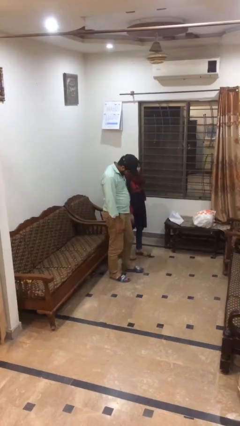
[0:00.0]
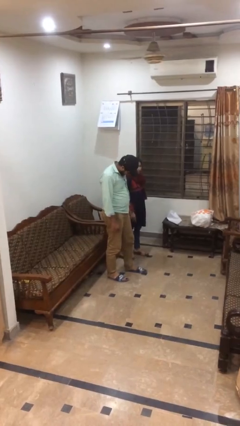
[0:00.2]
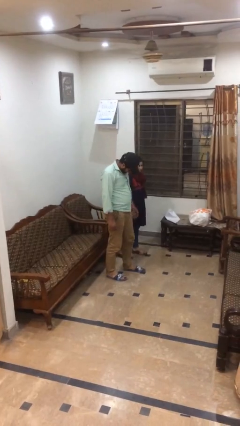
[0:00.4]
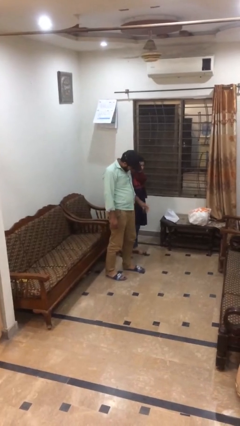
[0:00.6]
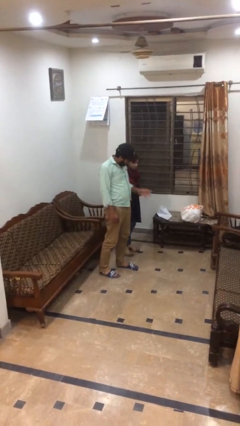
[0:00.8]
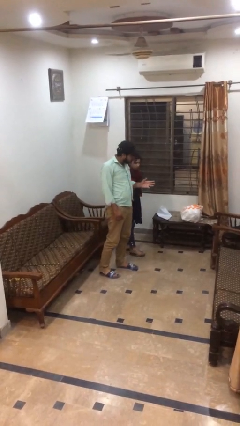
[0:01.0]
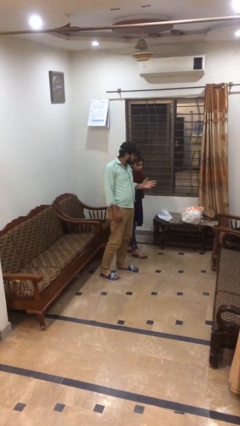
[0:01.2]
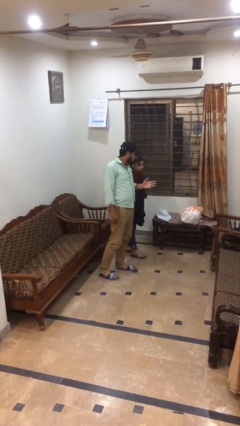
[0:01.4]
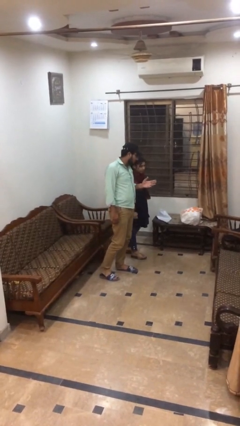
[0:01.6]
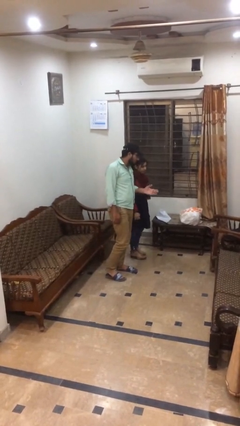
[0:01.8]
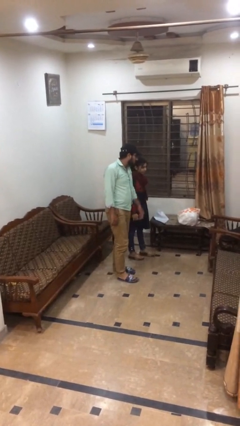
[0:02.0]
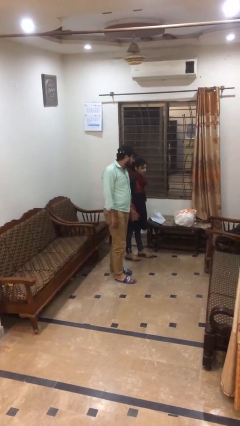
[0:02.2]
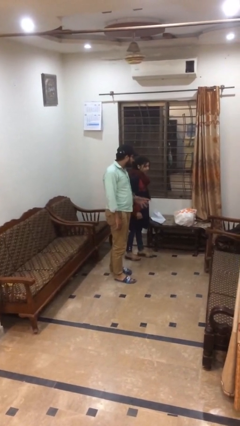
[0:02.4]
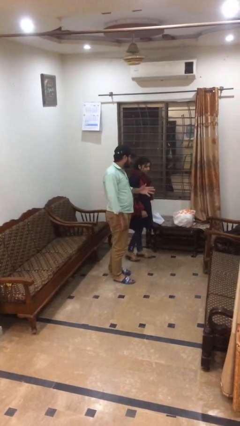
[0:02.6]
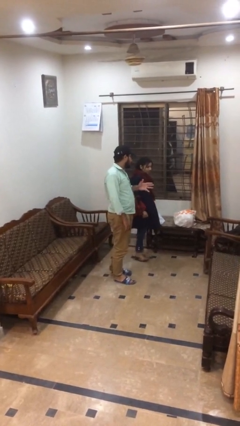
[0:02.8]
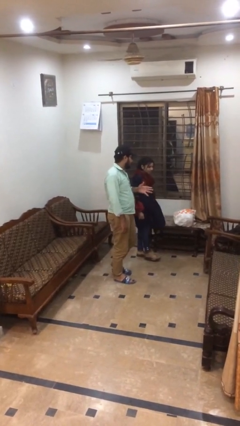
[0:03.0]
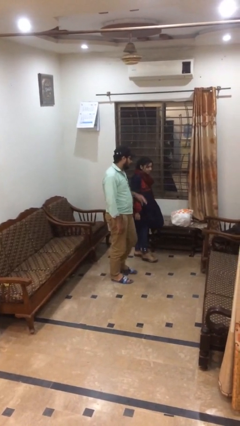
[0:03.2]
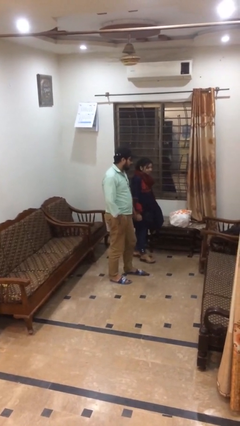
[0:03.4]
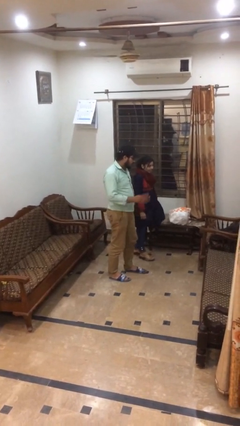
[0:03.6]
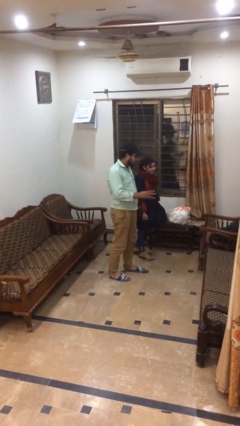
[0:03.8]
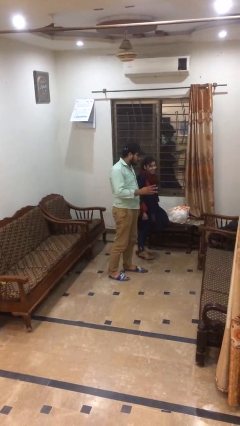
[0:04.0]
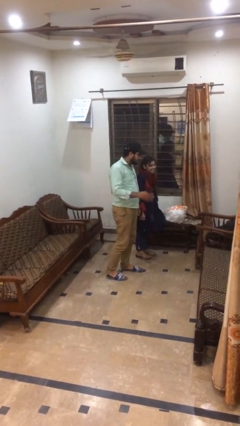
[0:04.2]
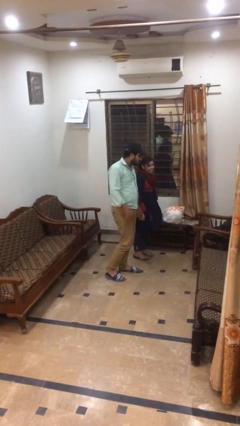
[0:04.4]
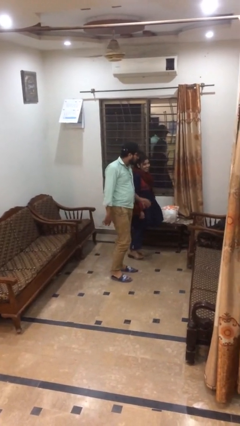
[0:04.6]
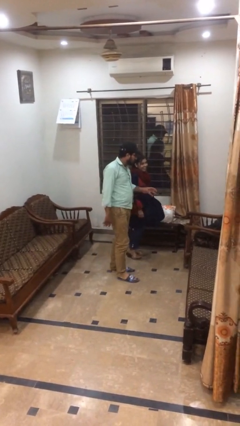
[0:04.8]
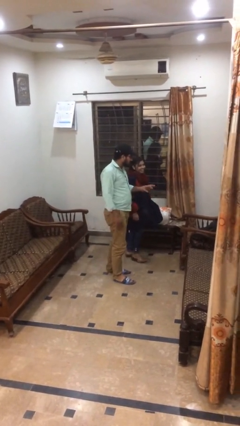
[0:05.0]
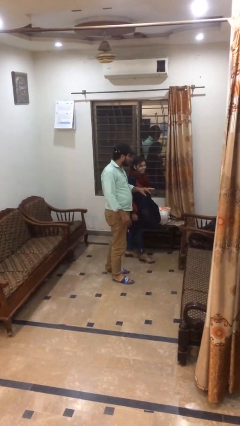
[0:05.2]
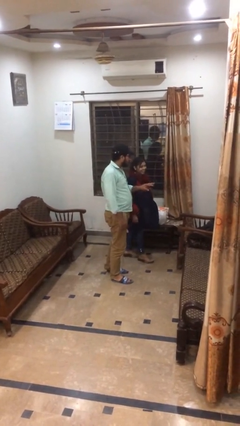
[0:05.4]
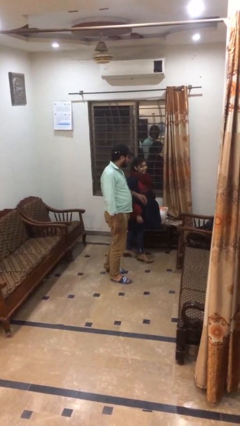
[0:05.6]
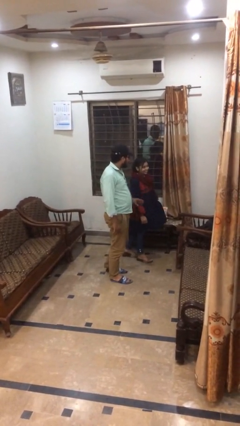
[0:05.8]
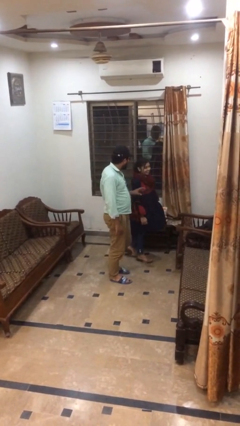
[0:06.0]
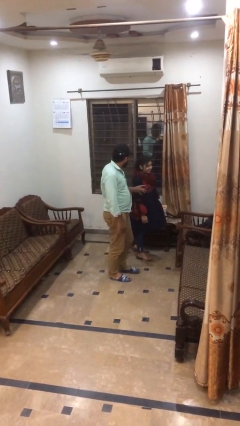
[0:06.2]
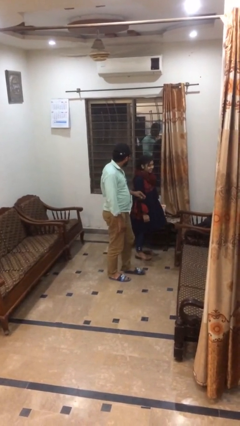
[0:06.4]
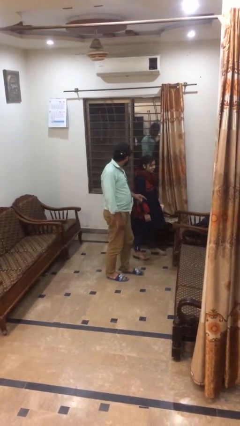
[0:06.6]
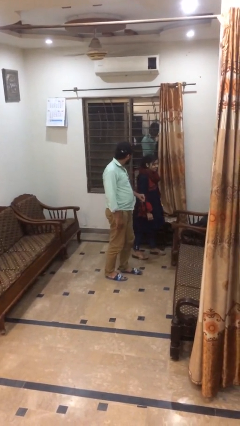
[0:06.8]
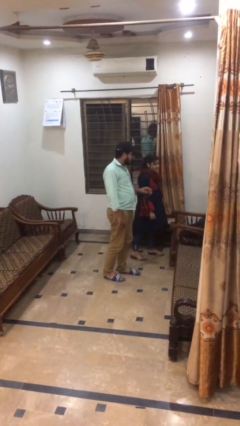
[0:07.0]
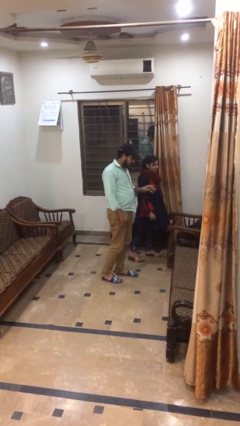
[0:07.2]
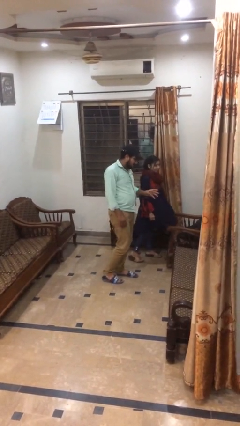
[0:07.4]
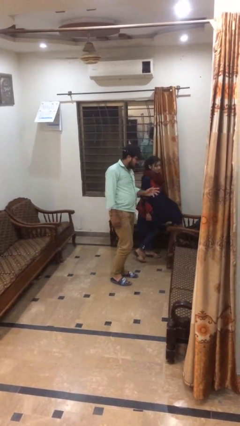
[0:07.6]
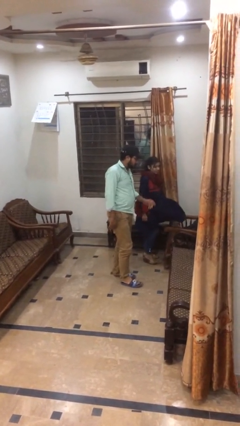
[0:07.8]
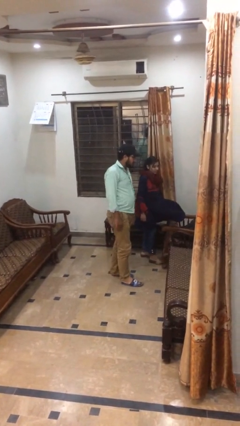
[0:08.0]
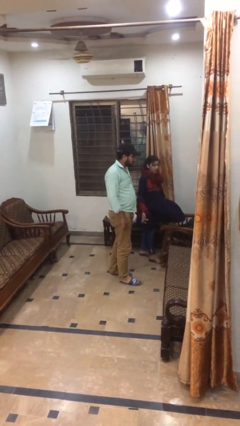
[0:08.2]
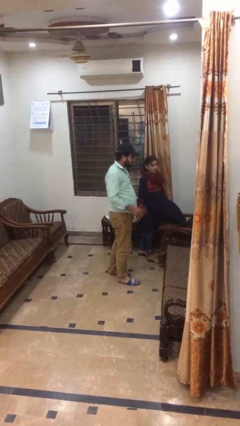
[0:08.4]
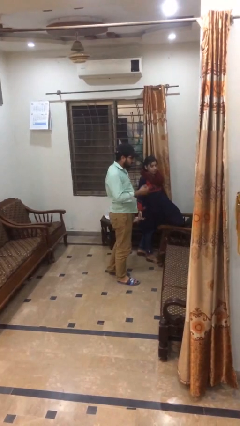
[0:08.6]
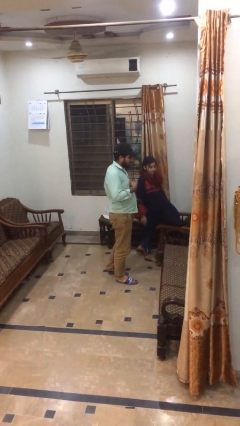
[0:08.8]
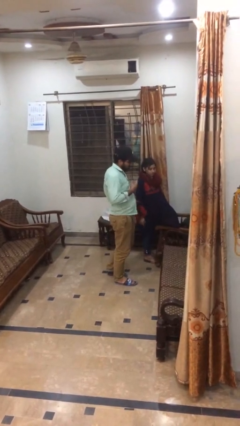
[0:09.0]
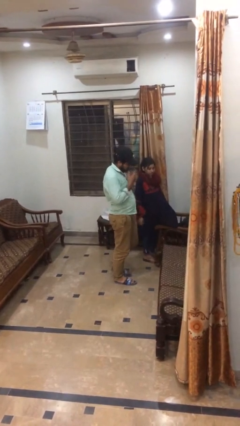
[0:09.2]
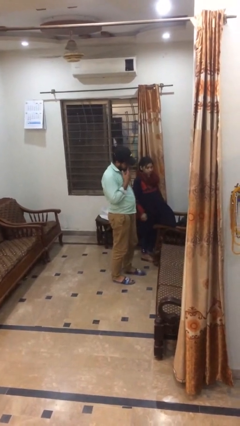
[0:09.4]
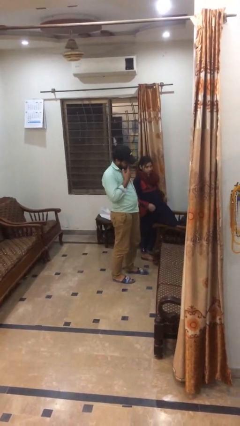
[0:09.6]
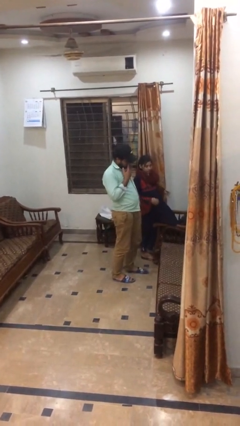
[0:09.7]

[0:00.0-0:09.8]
person talks to person

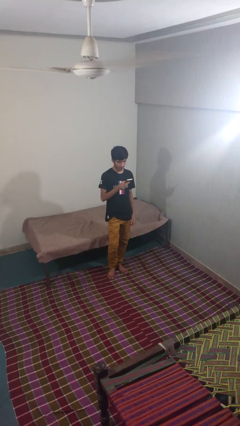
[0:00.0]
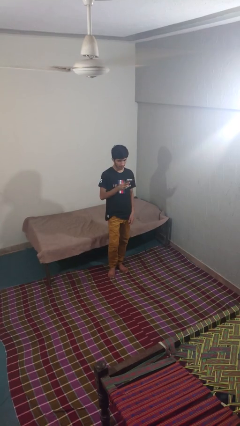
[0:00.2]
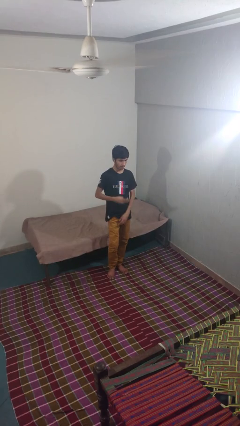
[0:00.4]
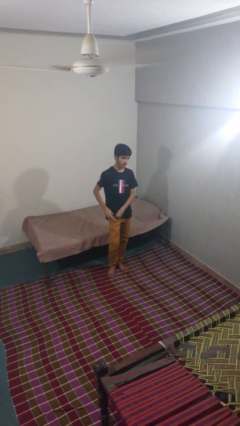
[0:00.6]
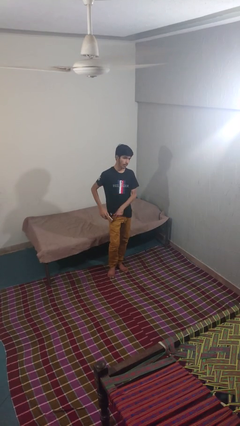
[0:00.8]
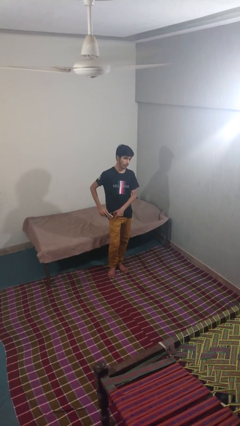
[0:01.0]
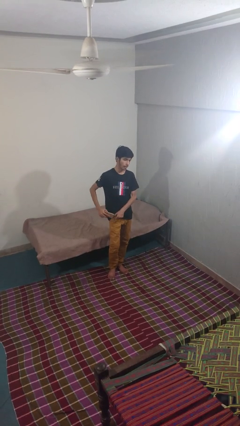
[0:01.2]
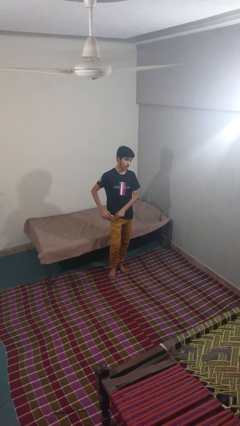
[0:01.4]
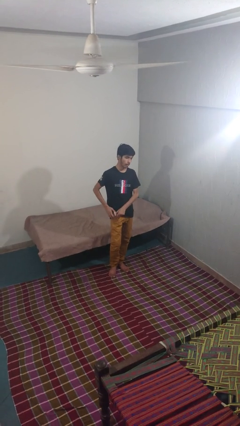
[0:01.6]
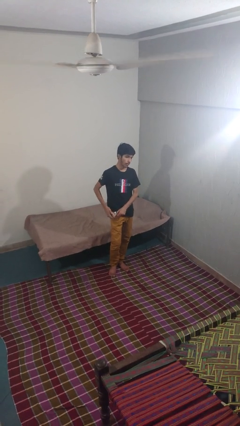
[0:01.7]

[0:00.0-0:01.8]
person puts phone into pocket

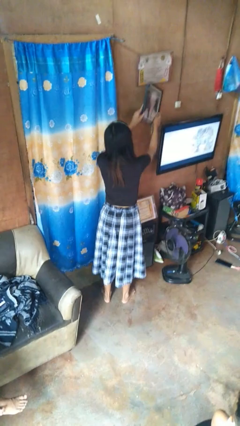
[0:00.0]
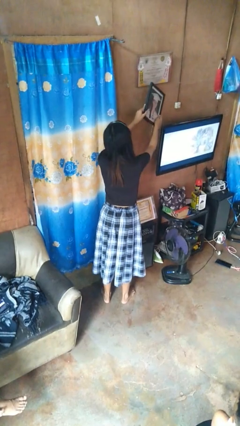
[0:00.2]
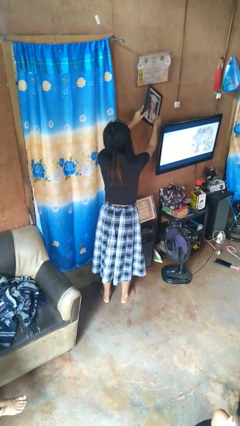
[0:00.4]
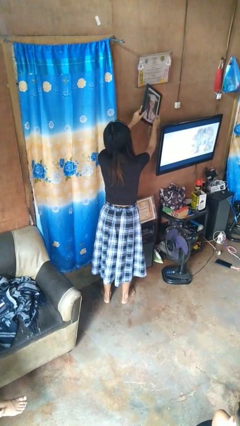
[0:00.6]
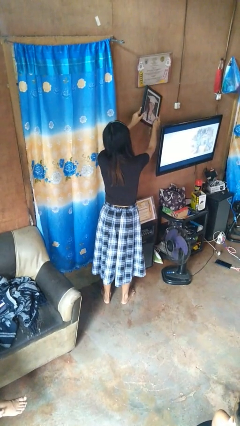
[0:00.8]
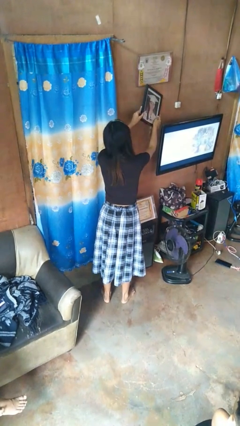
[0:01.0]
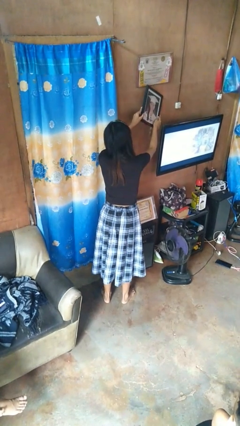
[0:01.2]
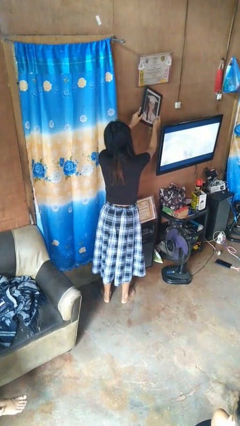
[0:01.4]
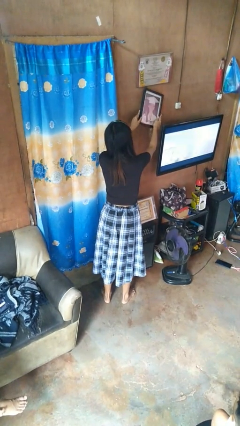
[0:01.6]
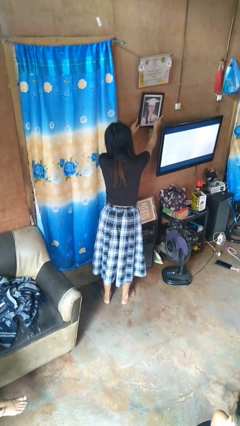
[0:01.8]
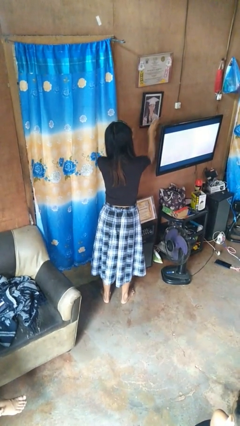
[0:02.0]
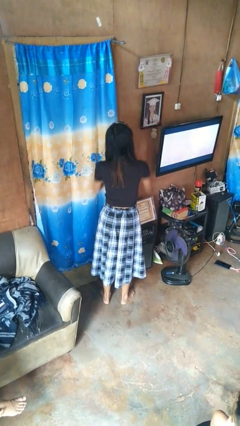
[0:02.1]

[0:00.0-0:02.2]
person puts up picture frame

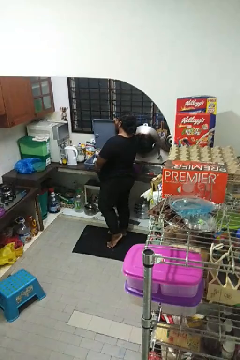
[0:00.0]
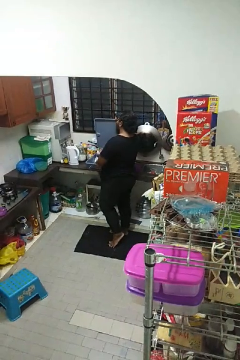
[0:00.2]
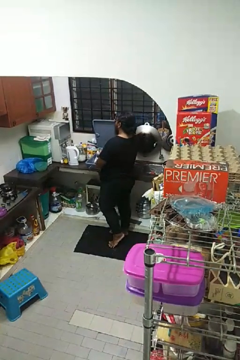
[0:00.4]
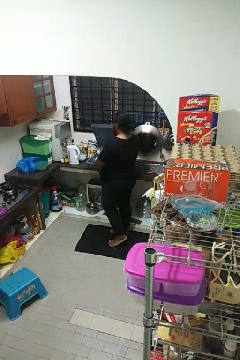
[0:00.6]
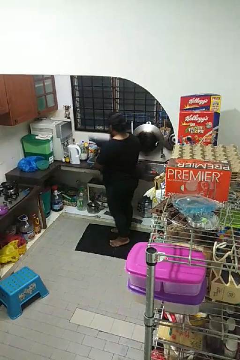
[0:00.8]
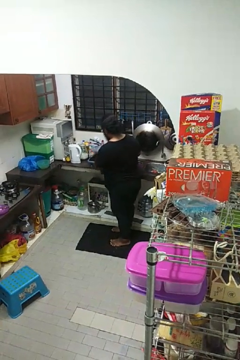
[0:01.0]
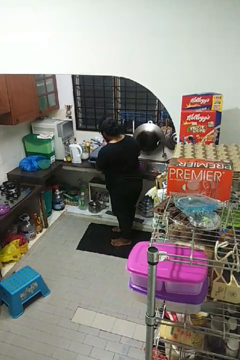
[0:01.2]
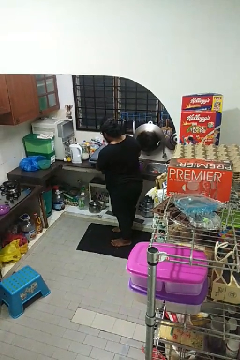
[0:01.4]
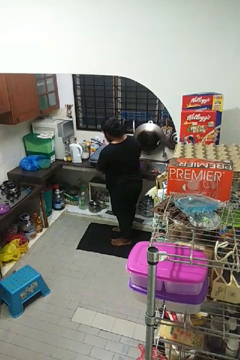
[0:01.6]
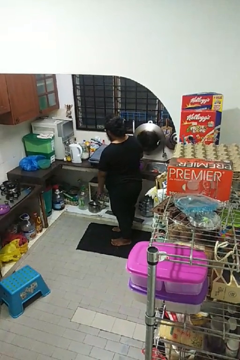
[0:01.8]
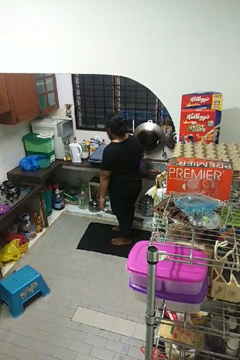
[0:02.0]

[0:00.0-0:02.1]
person closes dishwasher

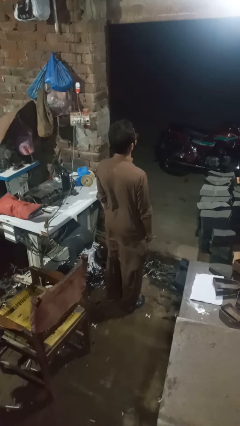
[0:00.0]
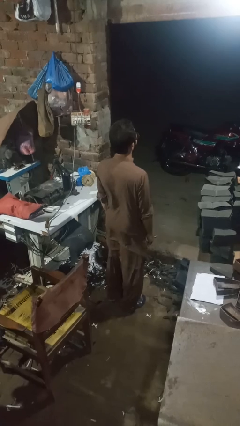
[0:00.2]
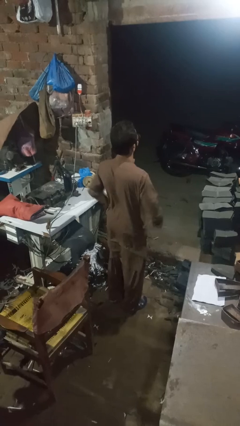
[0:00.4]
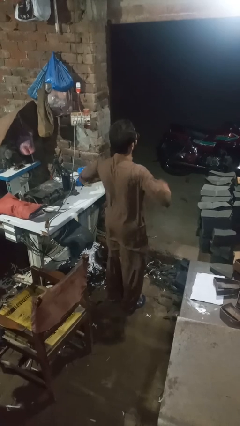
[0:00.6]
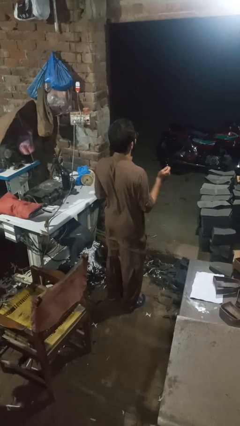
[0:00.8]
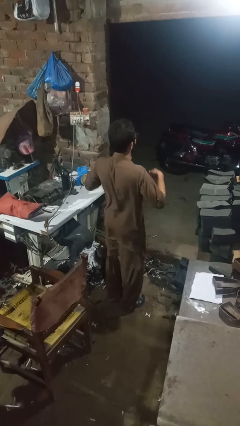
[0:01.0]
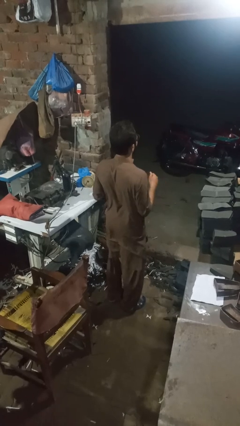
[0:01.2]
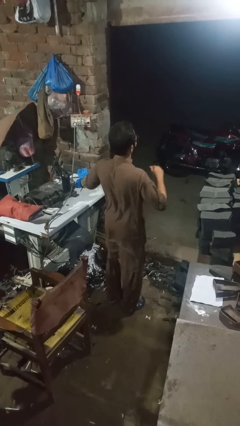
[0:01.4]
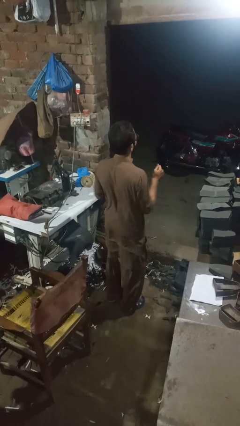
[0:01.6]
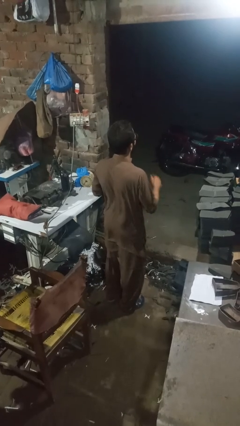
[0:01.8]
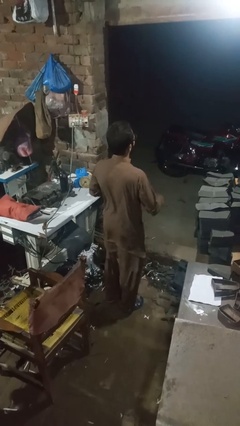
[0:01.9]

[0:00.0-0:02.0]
person dances in place

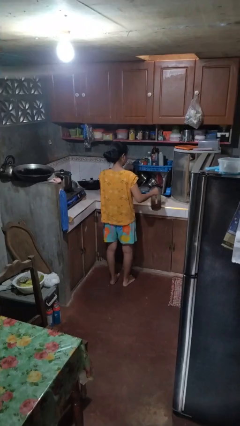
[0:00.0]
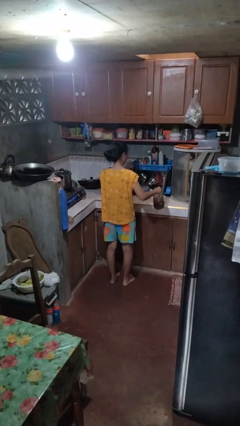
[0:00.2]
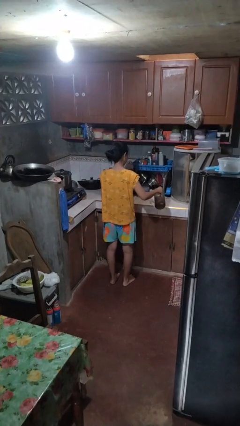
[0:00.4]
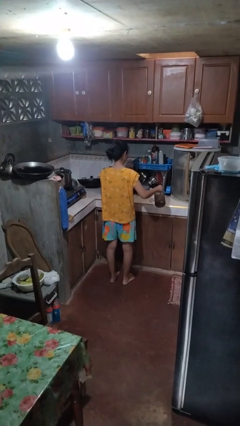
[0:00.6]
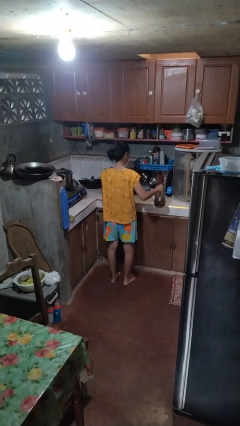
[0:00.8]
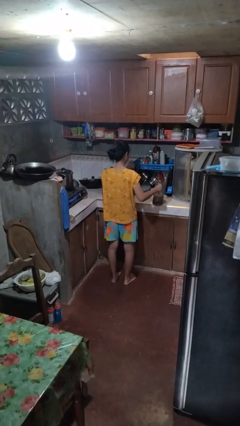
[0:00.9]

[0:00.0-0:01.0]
person pours into bowl
